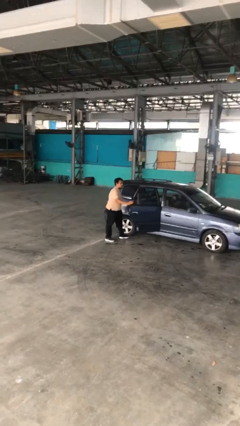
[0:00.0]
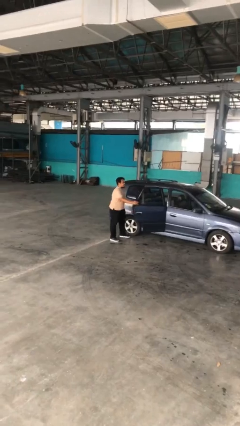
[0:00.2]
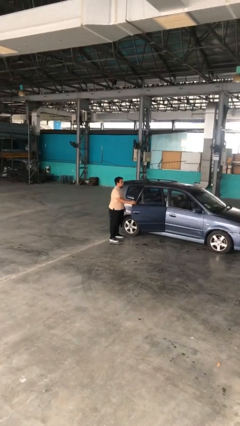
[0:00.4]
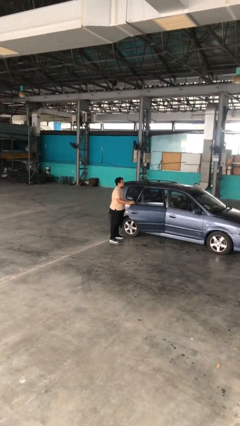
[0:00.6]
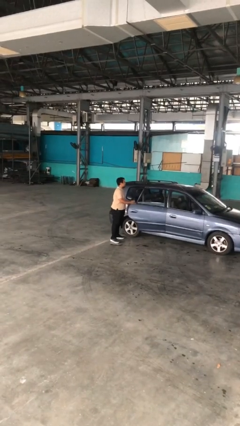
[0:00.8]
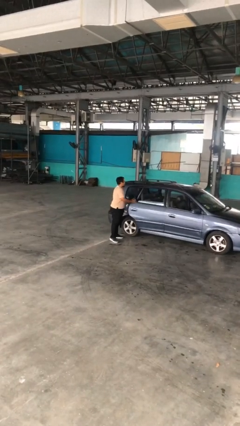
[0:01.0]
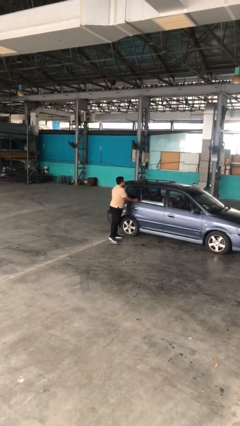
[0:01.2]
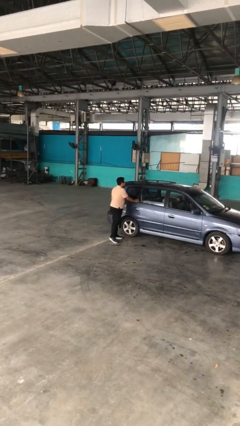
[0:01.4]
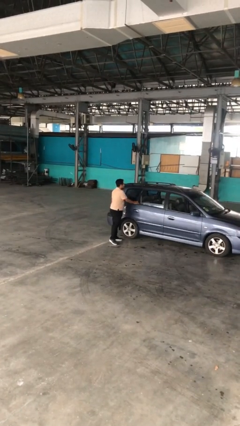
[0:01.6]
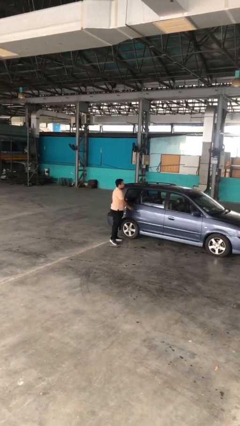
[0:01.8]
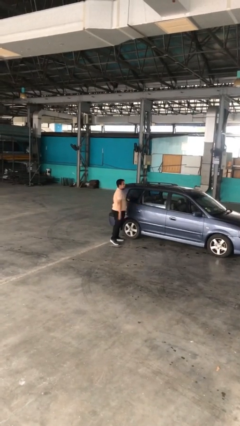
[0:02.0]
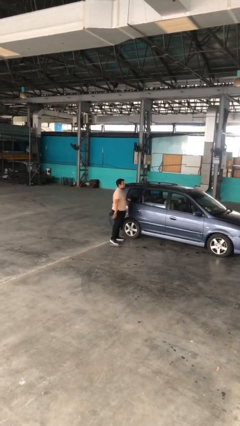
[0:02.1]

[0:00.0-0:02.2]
person closes car door

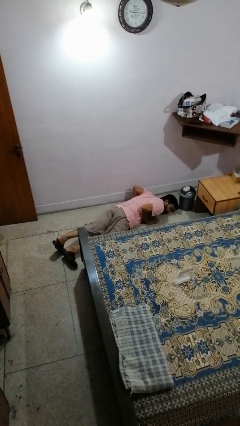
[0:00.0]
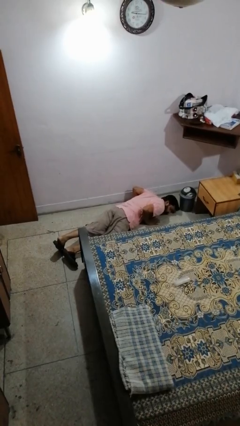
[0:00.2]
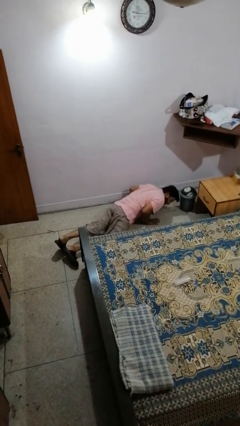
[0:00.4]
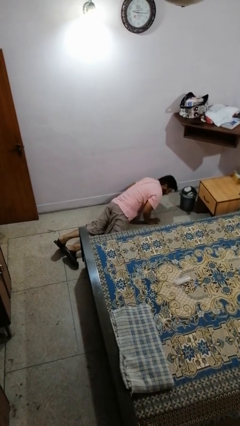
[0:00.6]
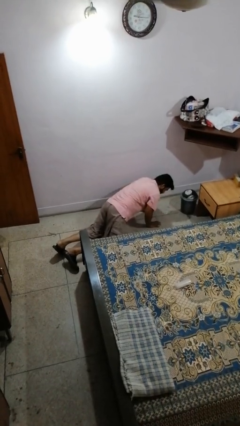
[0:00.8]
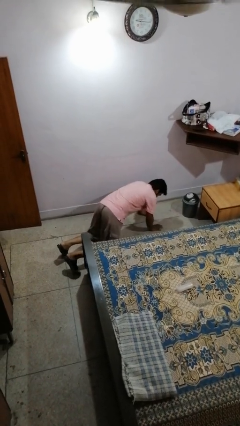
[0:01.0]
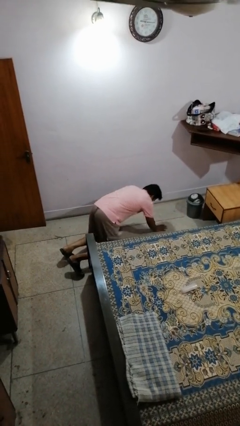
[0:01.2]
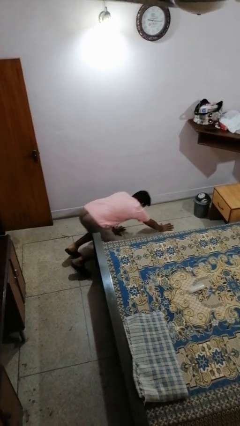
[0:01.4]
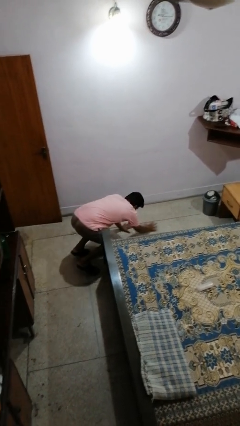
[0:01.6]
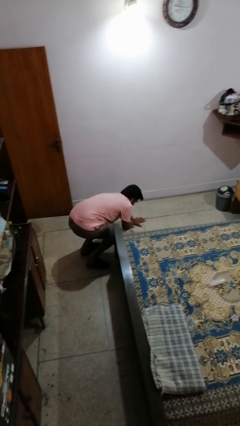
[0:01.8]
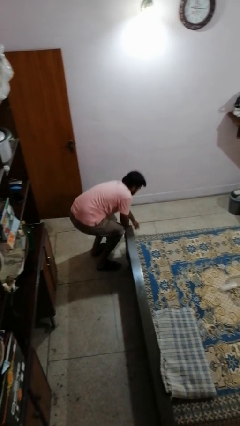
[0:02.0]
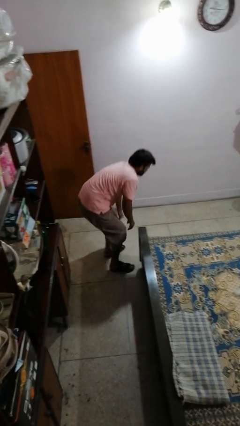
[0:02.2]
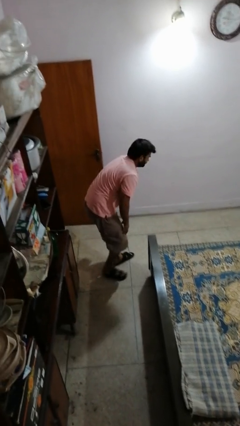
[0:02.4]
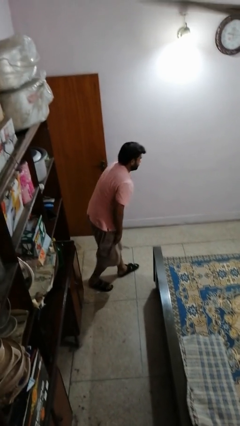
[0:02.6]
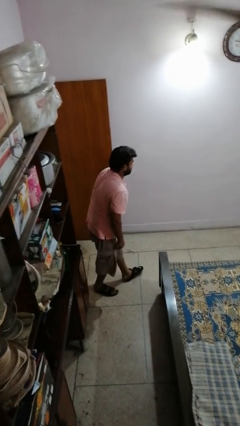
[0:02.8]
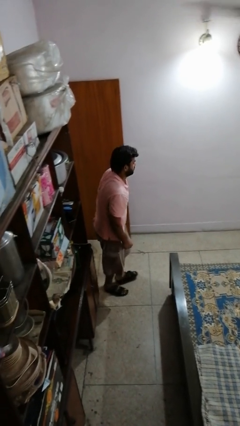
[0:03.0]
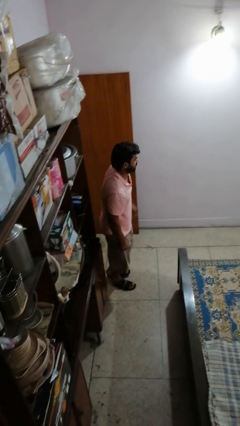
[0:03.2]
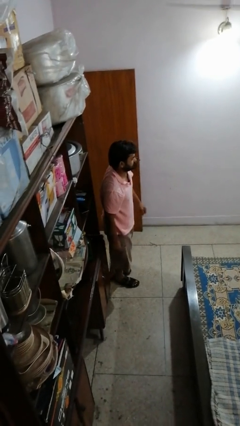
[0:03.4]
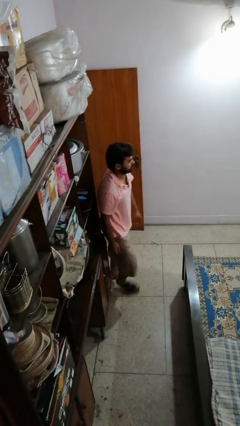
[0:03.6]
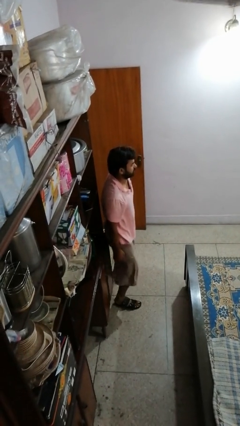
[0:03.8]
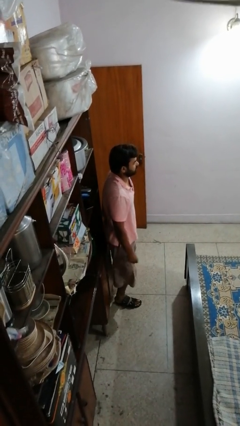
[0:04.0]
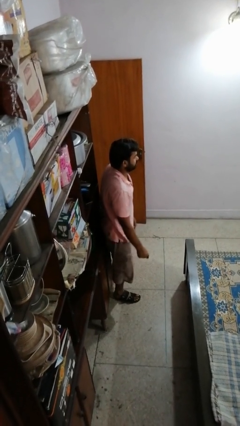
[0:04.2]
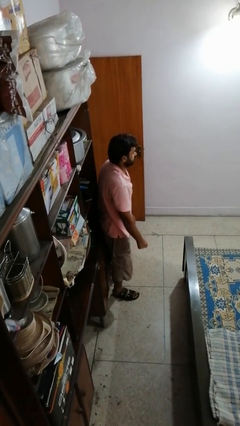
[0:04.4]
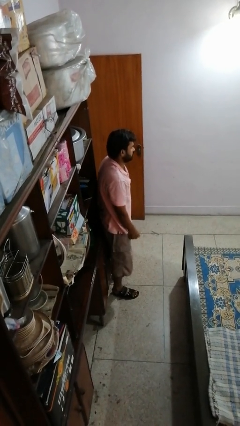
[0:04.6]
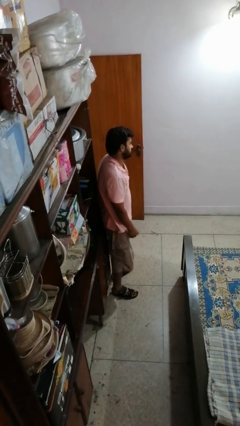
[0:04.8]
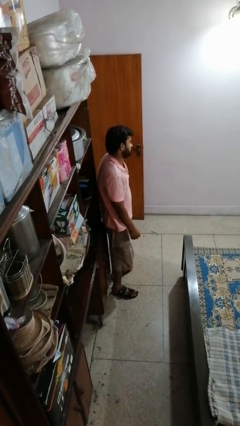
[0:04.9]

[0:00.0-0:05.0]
person stands up from floor

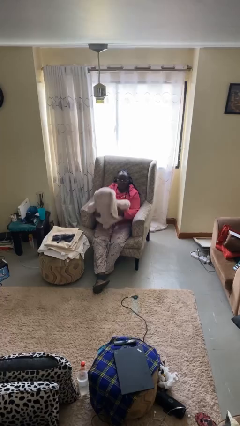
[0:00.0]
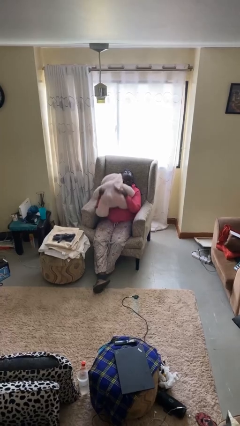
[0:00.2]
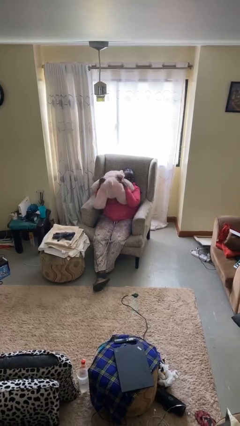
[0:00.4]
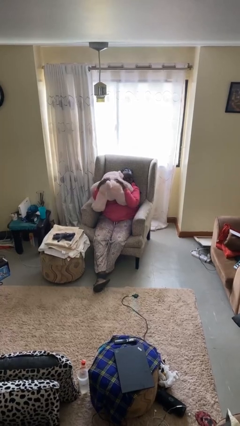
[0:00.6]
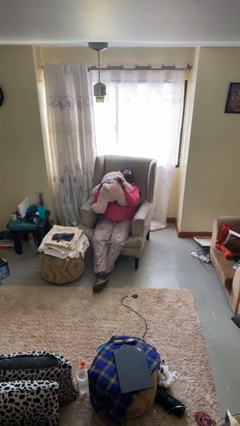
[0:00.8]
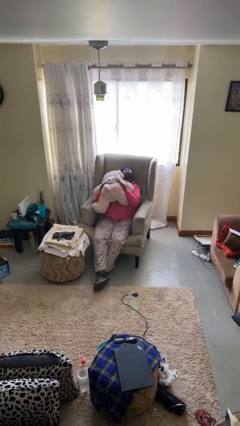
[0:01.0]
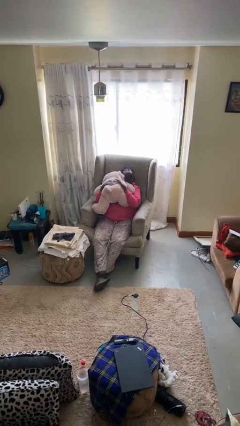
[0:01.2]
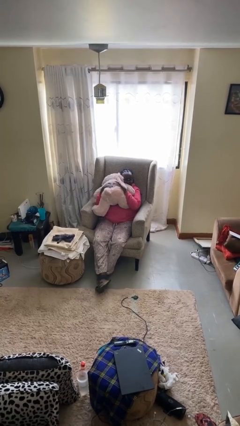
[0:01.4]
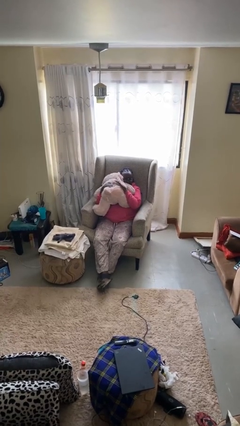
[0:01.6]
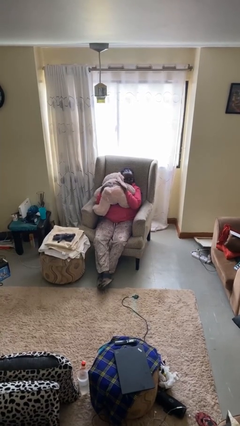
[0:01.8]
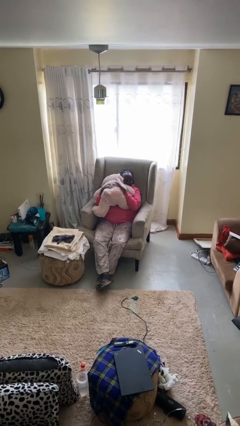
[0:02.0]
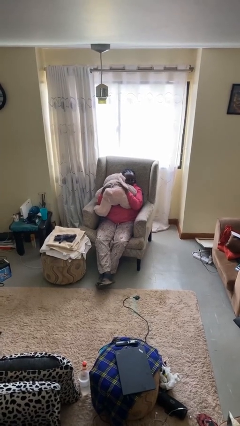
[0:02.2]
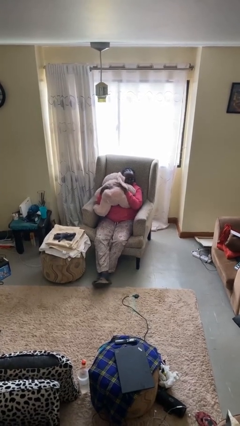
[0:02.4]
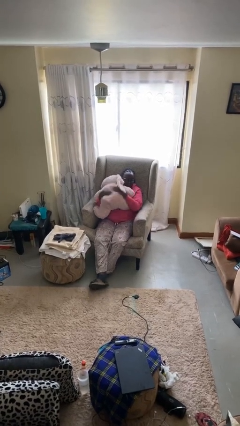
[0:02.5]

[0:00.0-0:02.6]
person hugs stuffed animal

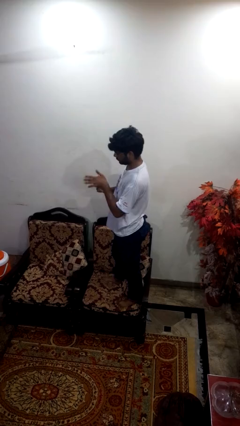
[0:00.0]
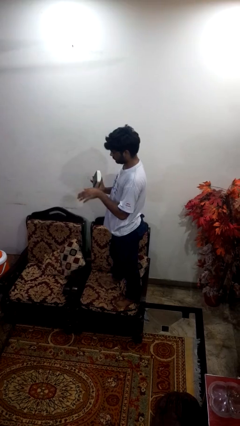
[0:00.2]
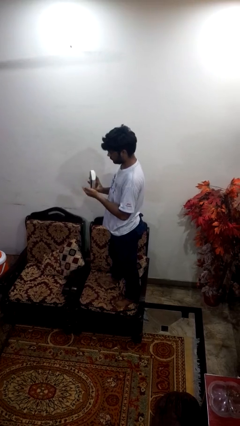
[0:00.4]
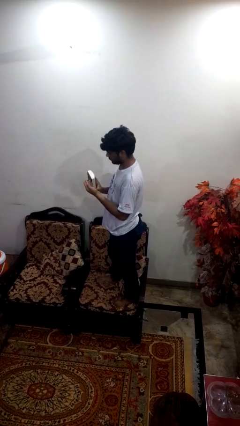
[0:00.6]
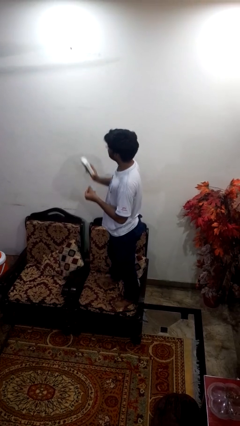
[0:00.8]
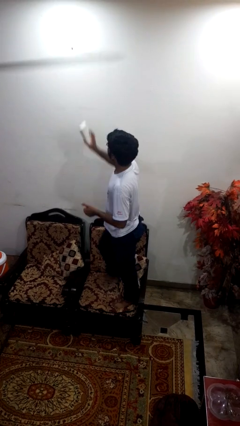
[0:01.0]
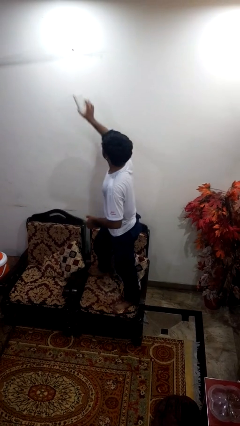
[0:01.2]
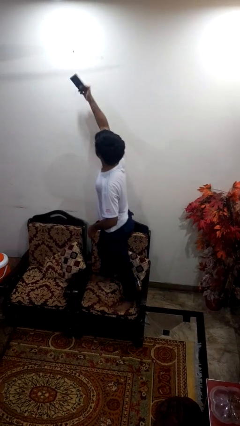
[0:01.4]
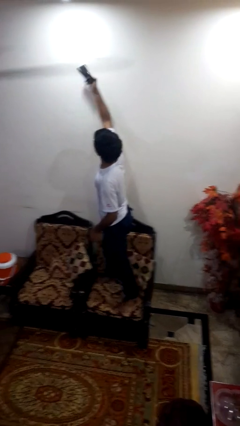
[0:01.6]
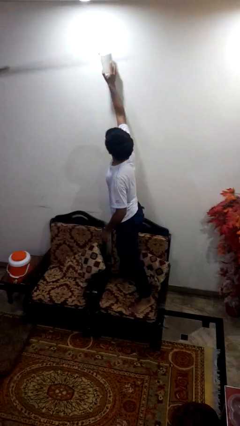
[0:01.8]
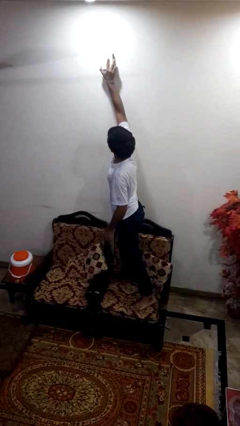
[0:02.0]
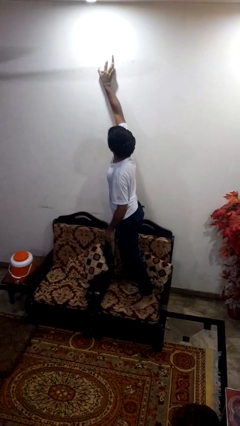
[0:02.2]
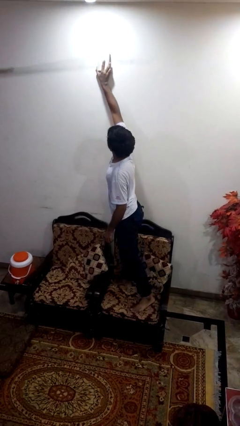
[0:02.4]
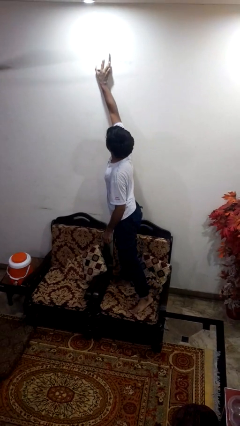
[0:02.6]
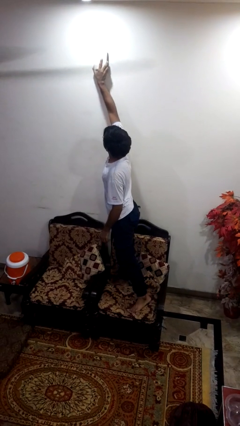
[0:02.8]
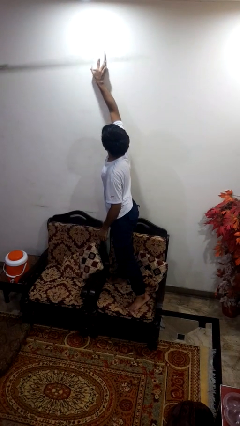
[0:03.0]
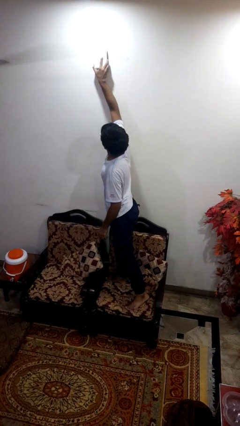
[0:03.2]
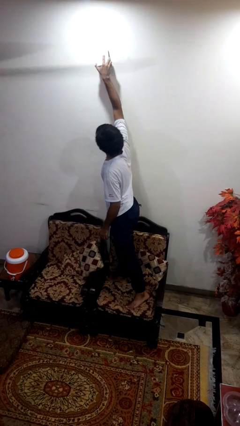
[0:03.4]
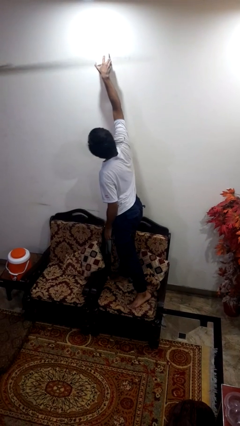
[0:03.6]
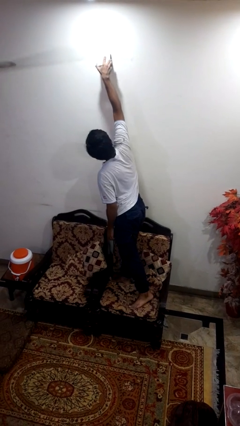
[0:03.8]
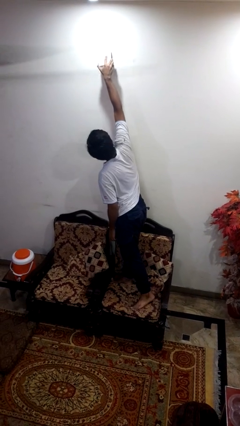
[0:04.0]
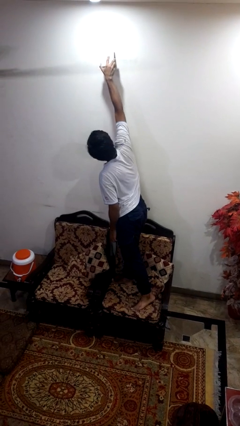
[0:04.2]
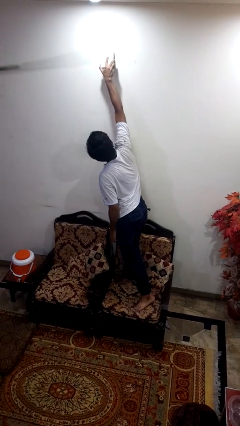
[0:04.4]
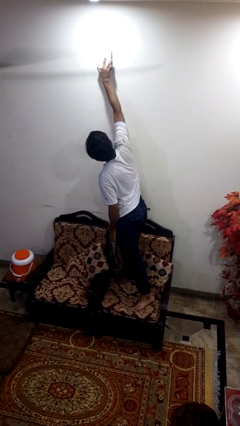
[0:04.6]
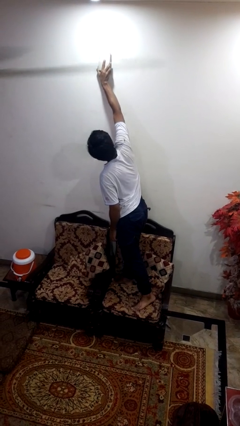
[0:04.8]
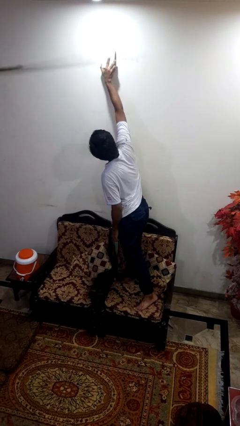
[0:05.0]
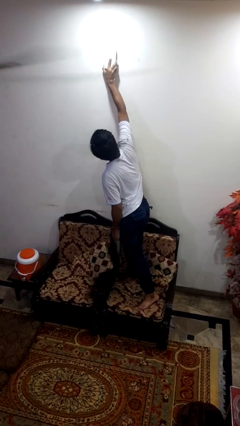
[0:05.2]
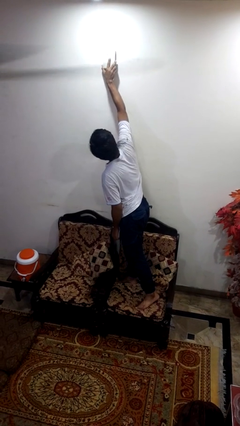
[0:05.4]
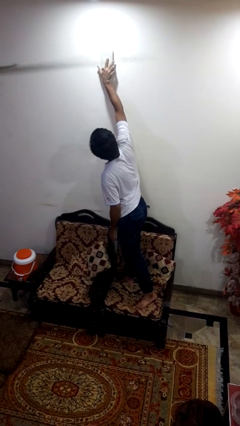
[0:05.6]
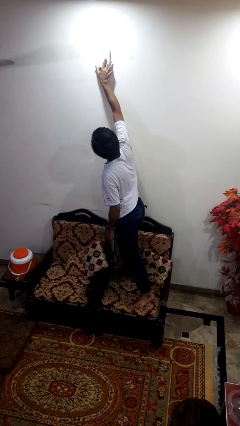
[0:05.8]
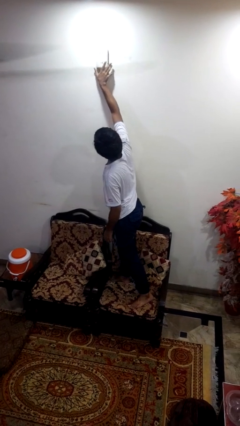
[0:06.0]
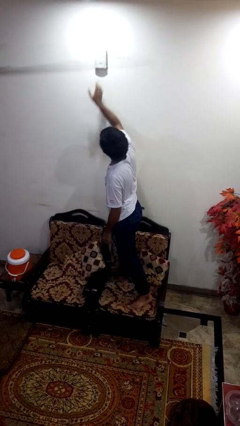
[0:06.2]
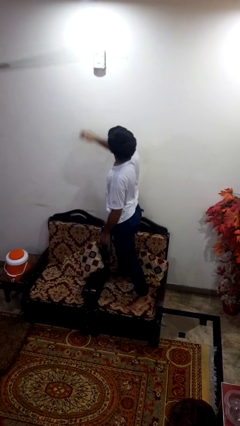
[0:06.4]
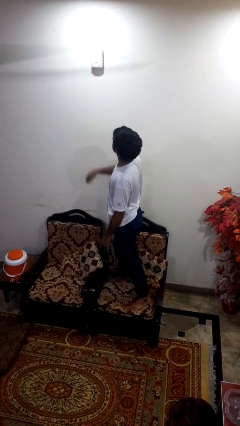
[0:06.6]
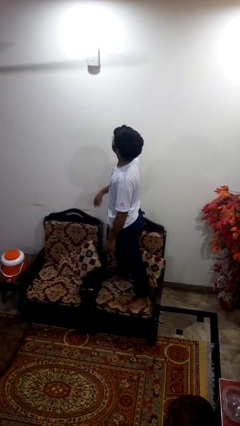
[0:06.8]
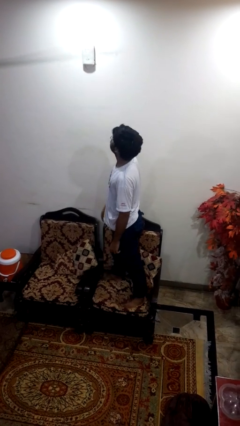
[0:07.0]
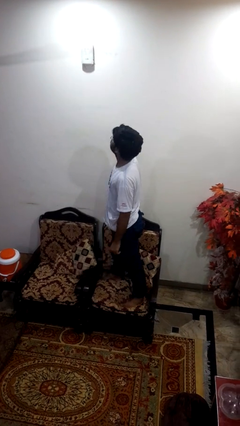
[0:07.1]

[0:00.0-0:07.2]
person puts up smoke detector

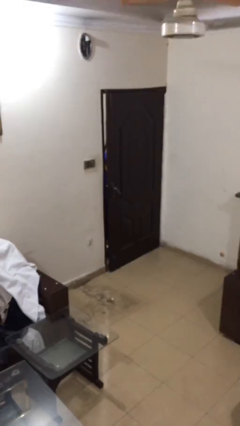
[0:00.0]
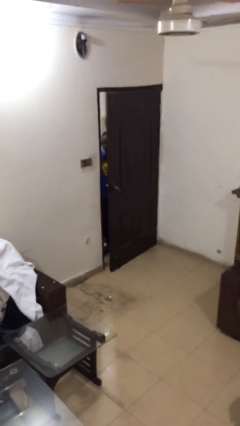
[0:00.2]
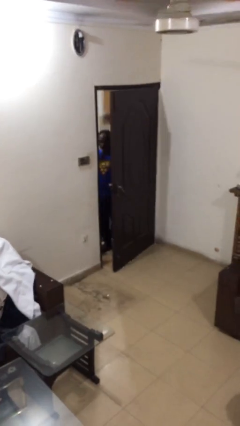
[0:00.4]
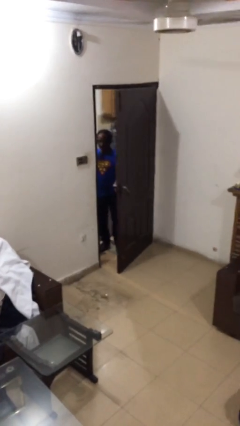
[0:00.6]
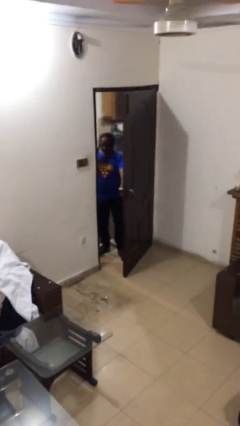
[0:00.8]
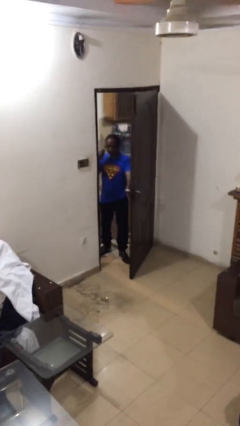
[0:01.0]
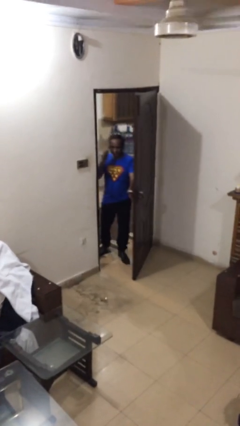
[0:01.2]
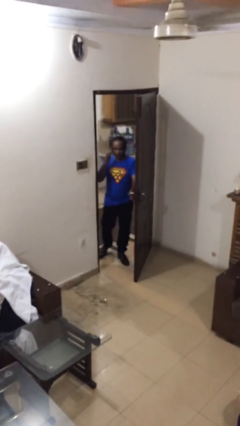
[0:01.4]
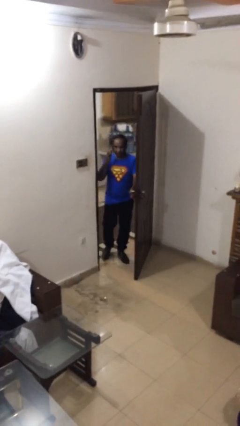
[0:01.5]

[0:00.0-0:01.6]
person opens facility door
